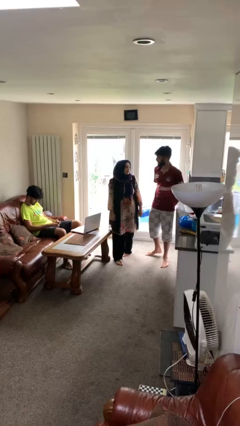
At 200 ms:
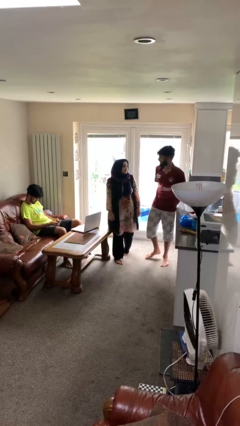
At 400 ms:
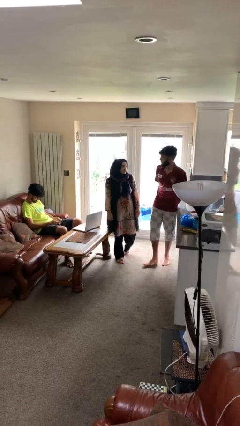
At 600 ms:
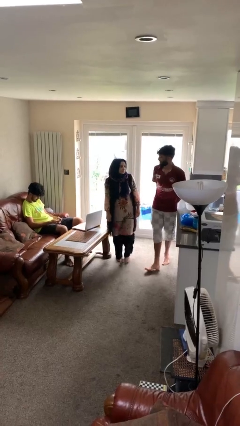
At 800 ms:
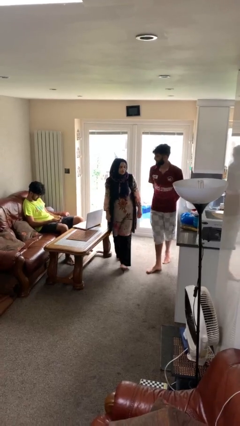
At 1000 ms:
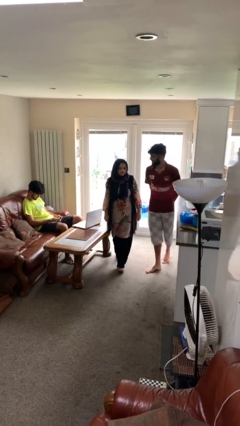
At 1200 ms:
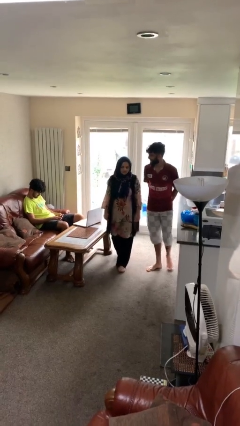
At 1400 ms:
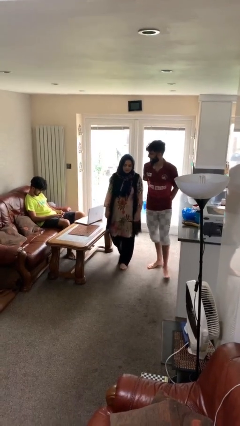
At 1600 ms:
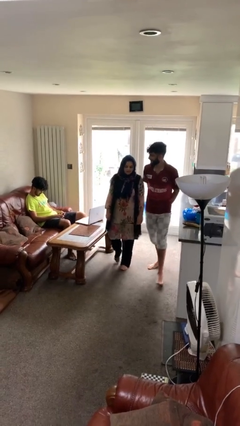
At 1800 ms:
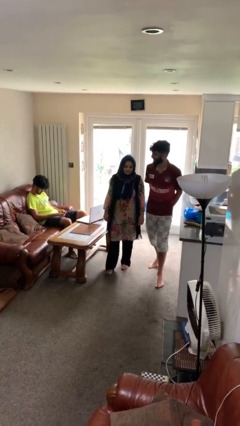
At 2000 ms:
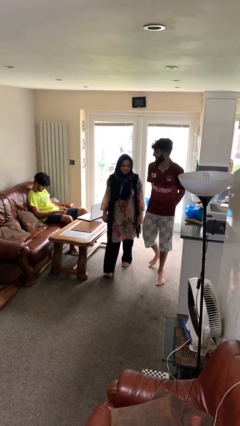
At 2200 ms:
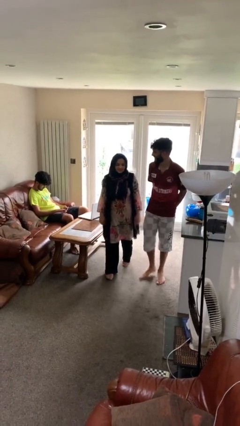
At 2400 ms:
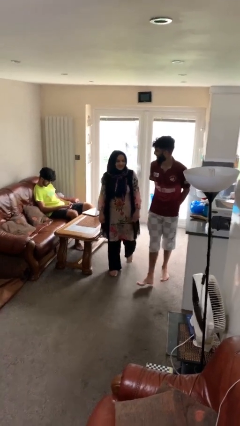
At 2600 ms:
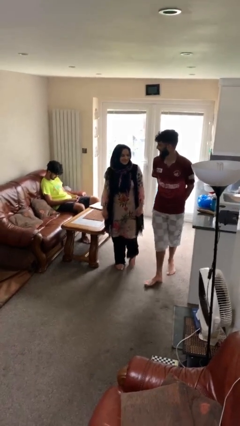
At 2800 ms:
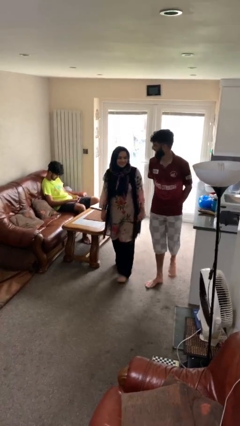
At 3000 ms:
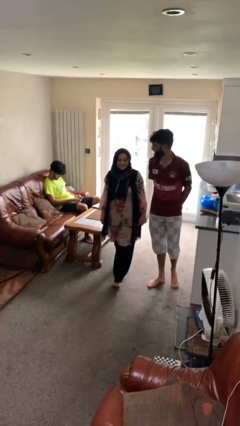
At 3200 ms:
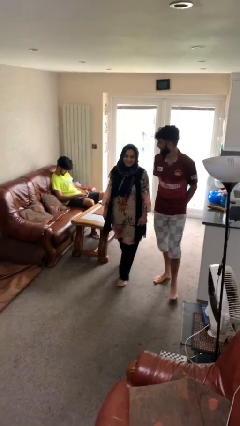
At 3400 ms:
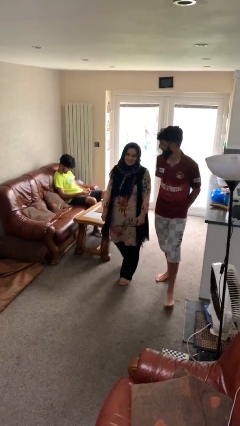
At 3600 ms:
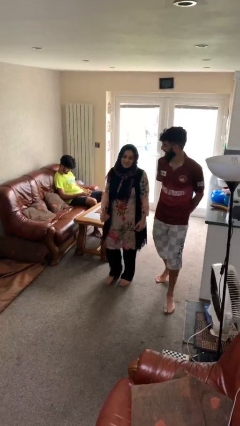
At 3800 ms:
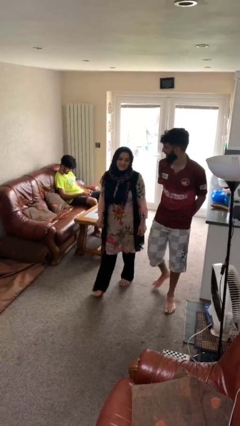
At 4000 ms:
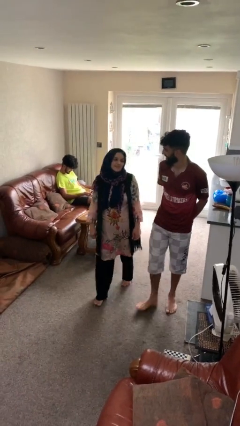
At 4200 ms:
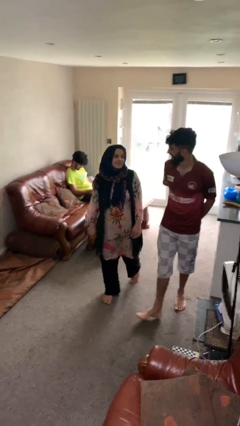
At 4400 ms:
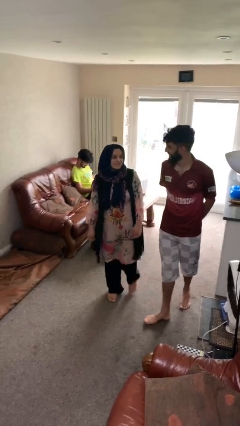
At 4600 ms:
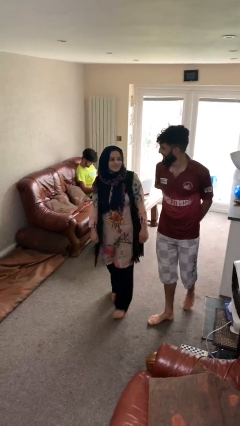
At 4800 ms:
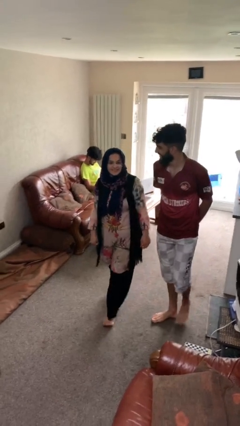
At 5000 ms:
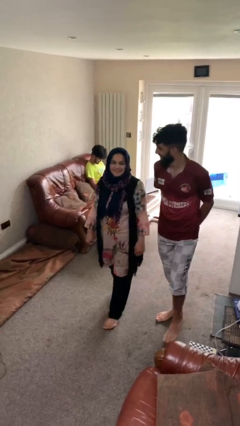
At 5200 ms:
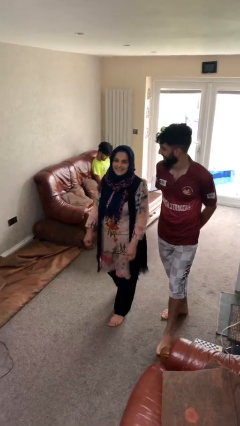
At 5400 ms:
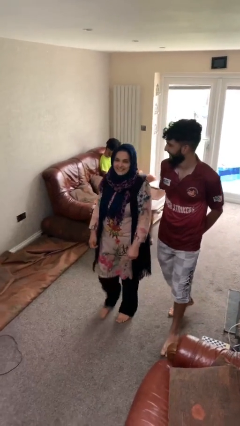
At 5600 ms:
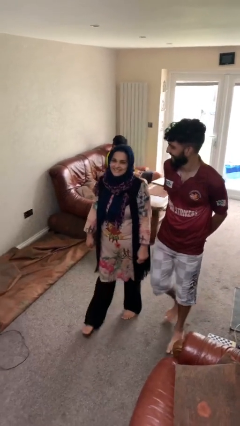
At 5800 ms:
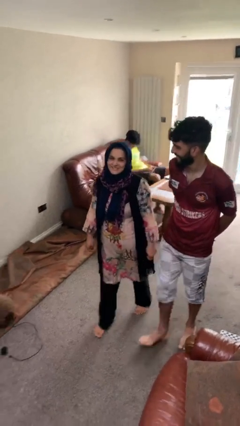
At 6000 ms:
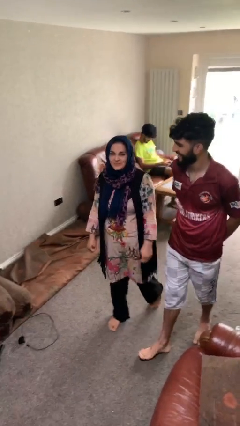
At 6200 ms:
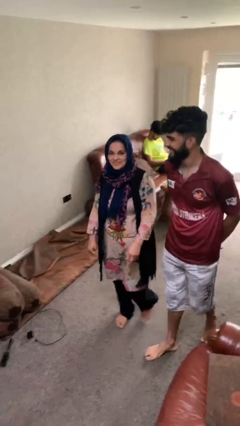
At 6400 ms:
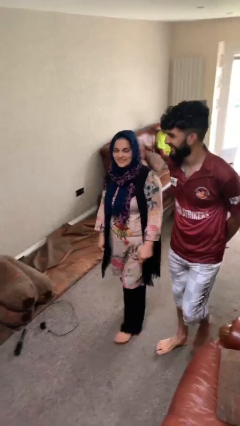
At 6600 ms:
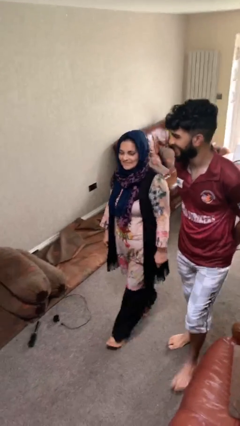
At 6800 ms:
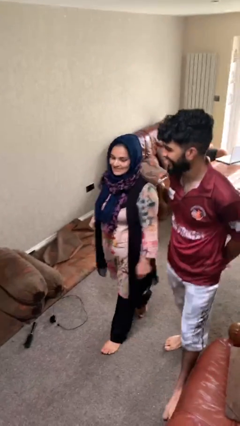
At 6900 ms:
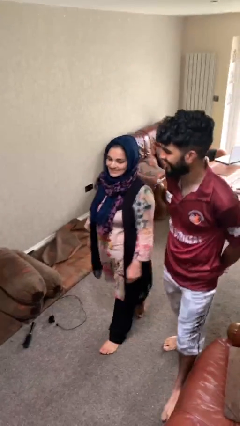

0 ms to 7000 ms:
person talks to person

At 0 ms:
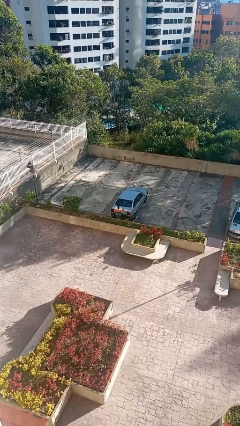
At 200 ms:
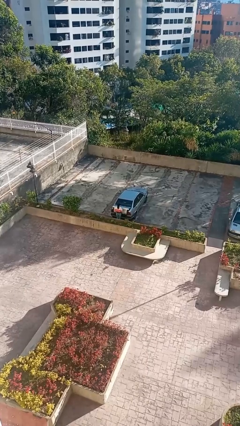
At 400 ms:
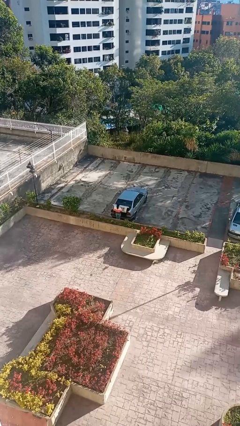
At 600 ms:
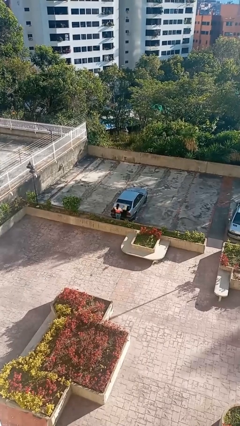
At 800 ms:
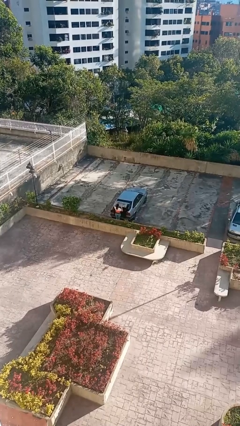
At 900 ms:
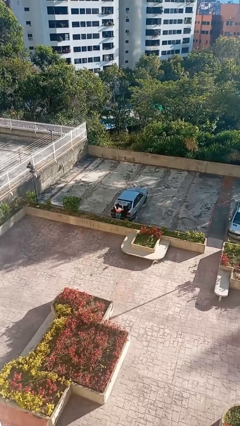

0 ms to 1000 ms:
person opens car trunk

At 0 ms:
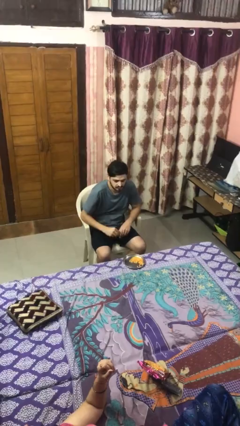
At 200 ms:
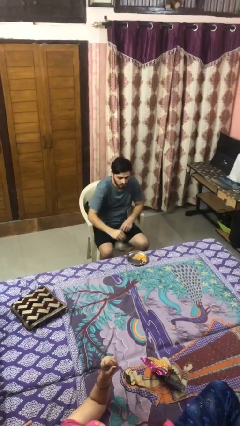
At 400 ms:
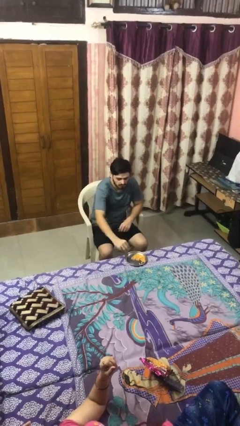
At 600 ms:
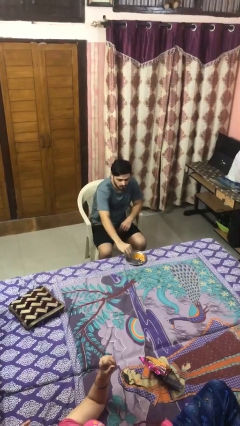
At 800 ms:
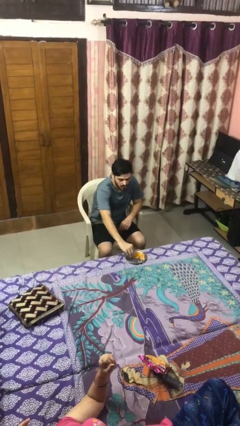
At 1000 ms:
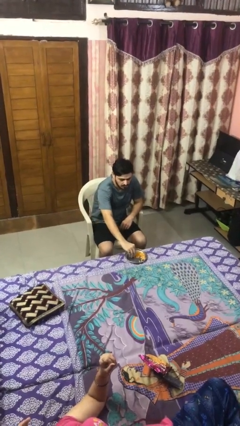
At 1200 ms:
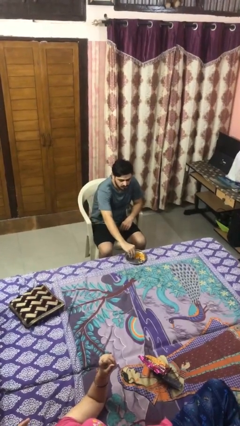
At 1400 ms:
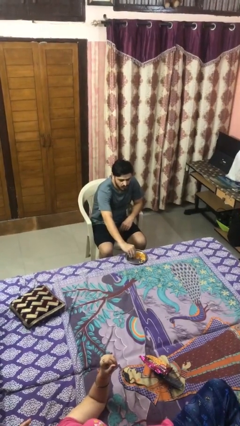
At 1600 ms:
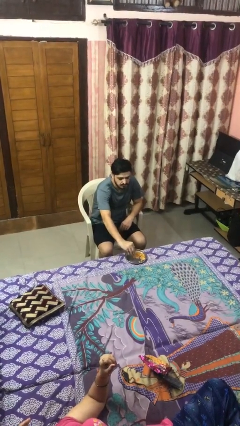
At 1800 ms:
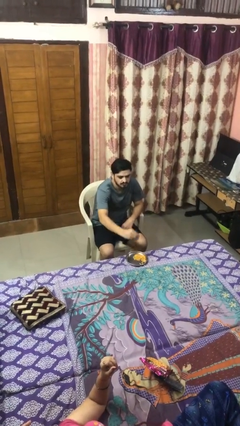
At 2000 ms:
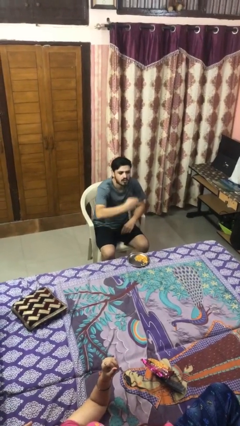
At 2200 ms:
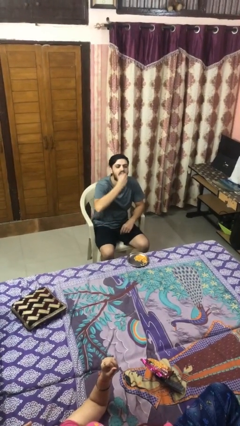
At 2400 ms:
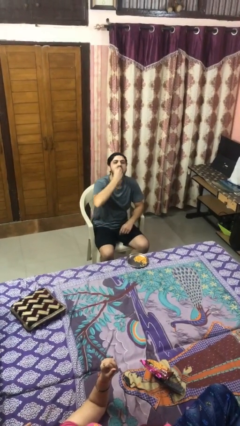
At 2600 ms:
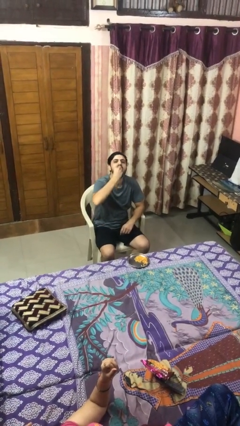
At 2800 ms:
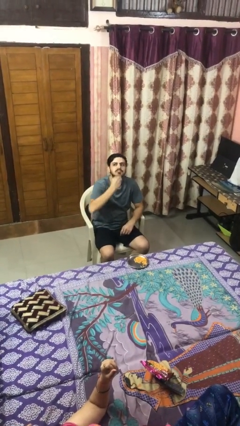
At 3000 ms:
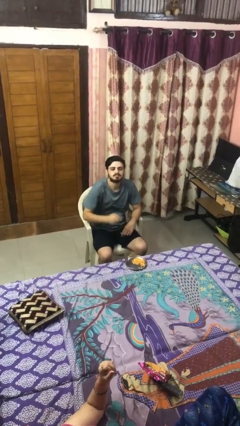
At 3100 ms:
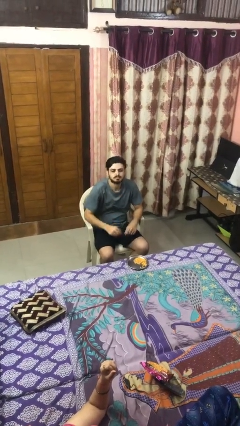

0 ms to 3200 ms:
person eats with hands

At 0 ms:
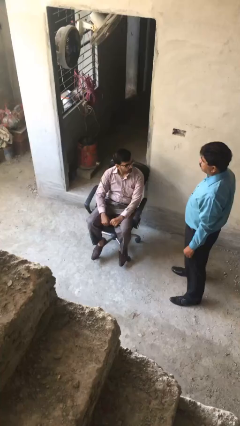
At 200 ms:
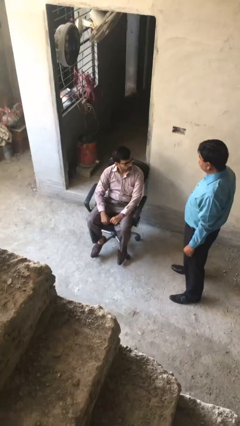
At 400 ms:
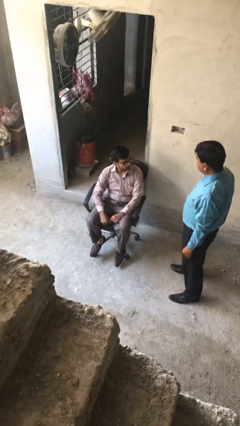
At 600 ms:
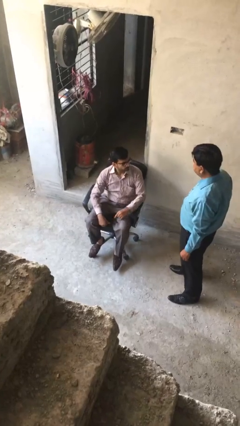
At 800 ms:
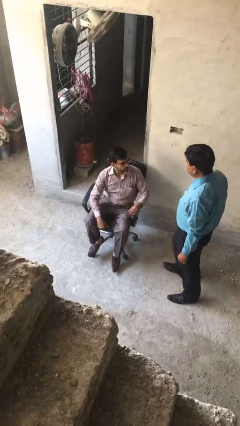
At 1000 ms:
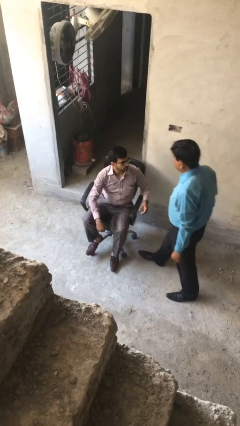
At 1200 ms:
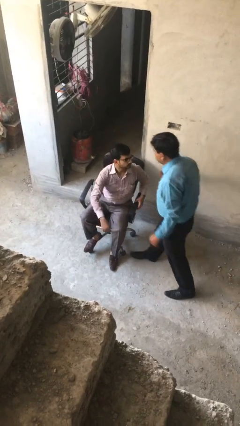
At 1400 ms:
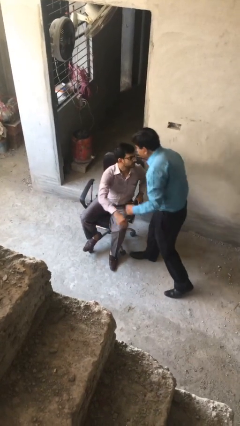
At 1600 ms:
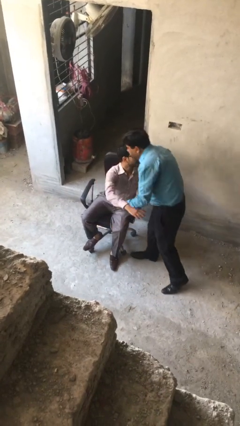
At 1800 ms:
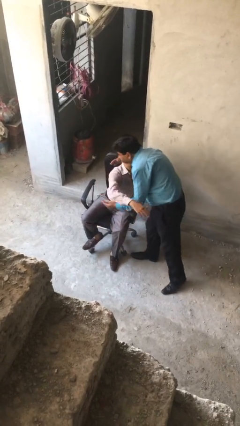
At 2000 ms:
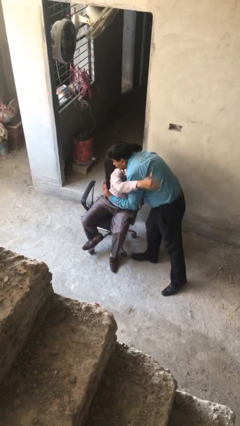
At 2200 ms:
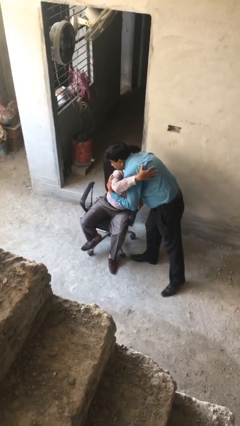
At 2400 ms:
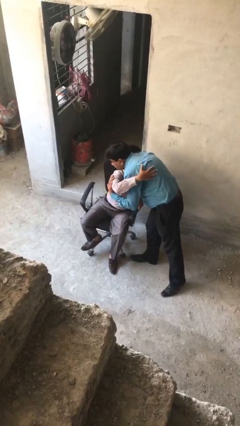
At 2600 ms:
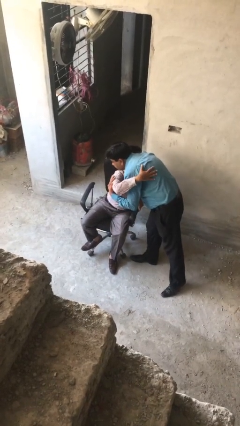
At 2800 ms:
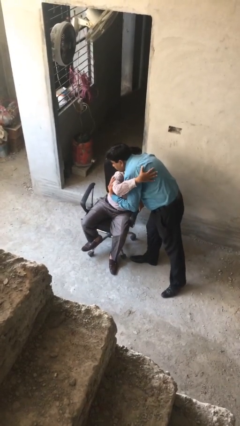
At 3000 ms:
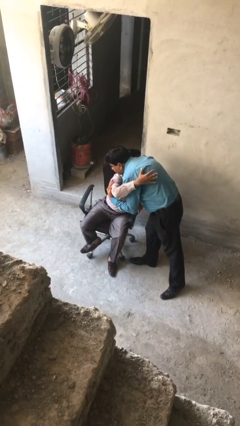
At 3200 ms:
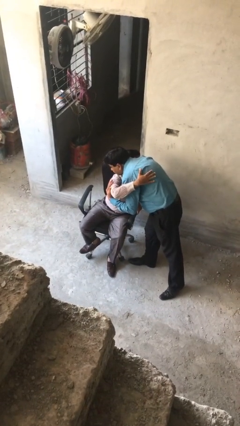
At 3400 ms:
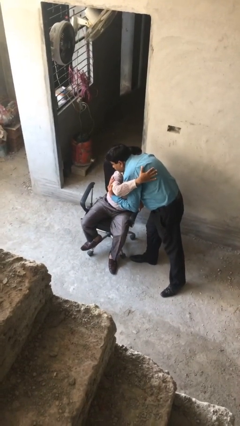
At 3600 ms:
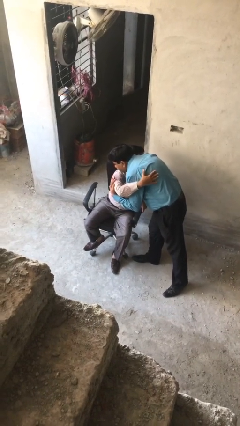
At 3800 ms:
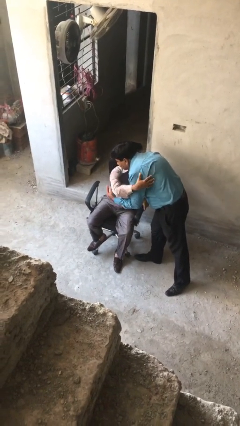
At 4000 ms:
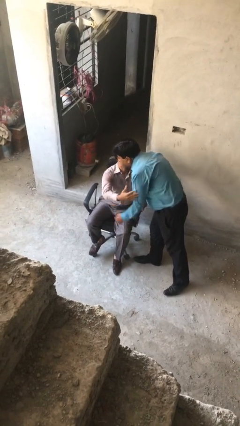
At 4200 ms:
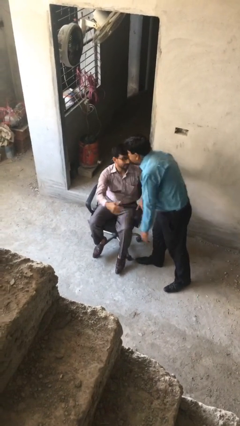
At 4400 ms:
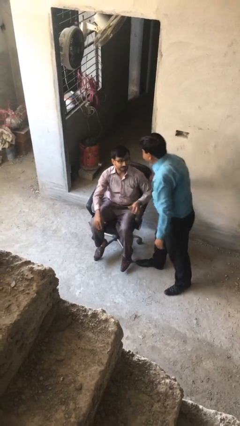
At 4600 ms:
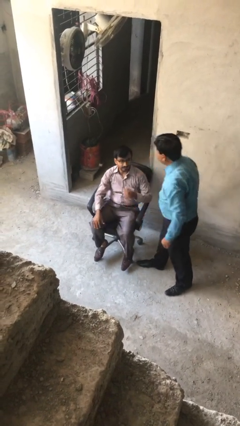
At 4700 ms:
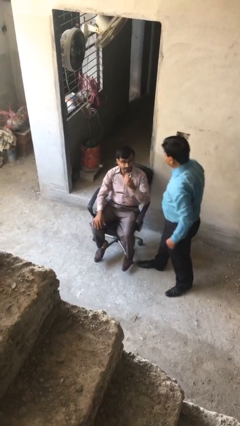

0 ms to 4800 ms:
person embraces person

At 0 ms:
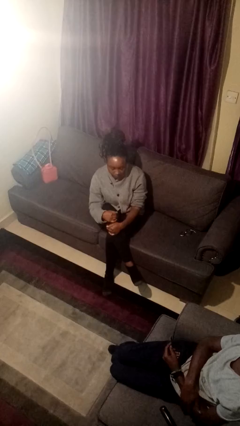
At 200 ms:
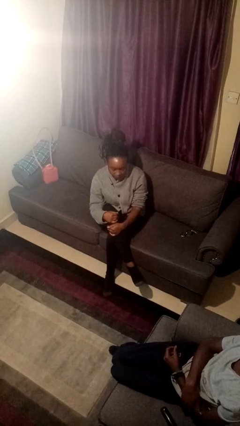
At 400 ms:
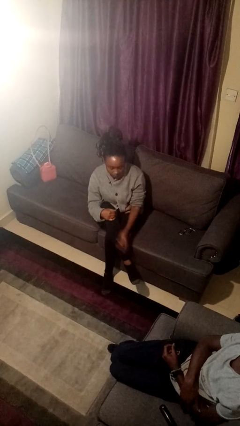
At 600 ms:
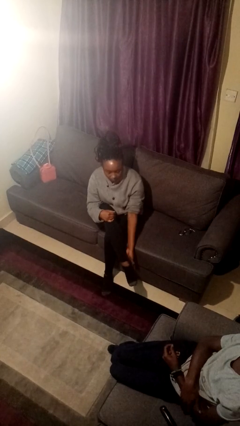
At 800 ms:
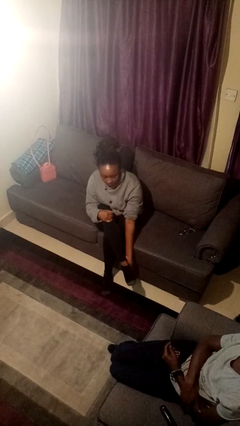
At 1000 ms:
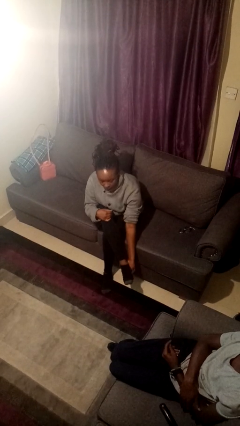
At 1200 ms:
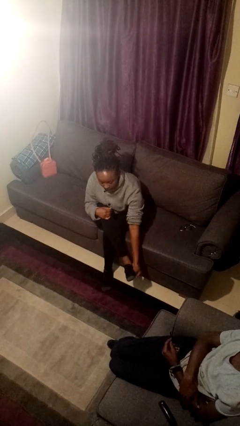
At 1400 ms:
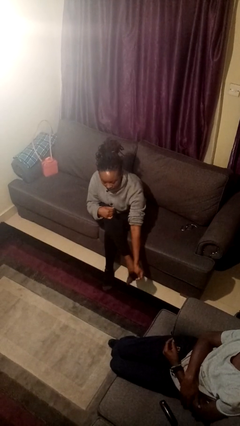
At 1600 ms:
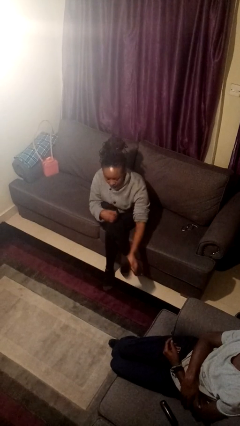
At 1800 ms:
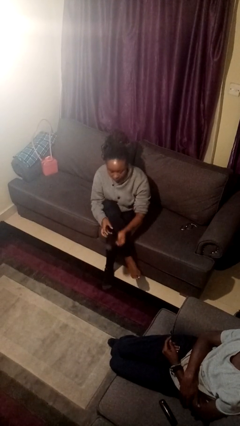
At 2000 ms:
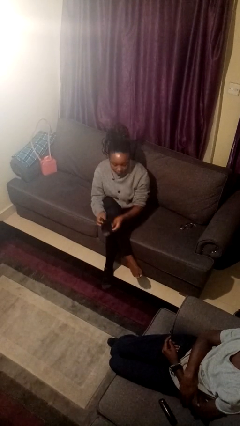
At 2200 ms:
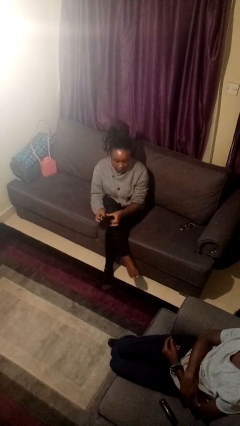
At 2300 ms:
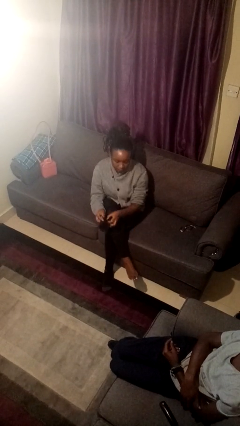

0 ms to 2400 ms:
person takes off socks
